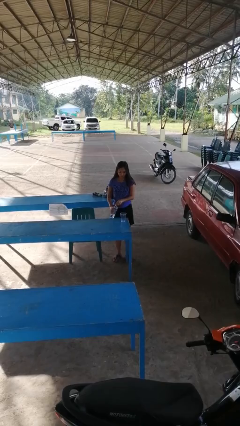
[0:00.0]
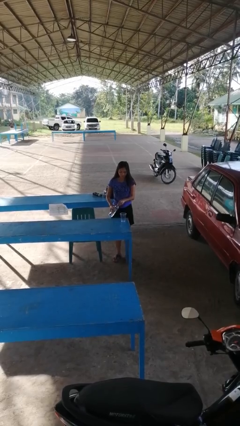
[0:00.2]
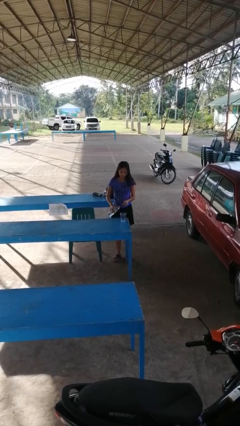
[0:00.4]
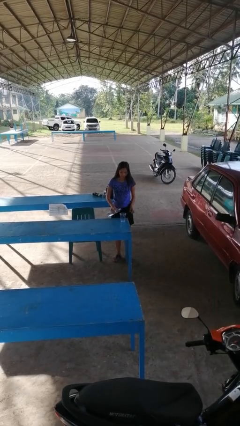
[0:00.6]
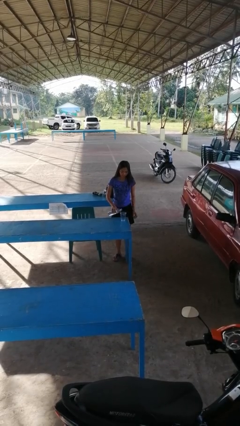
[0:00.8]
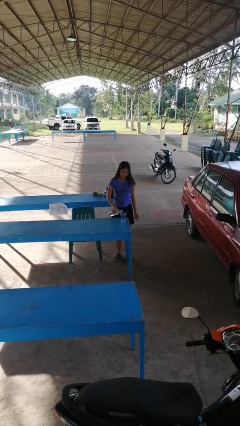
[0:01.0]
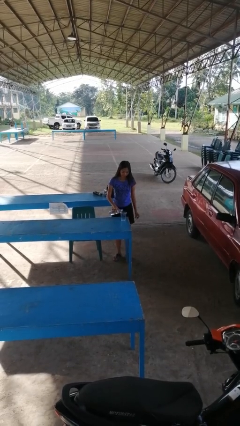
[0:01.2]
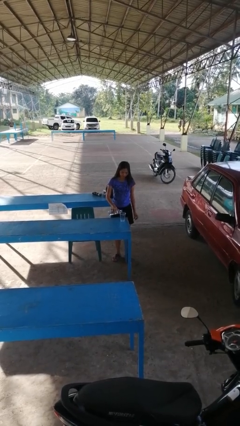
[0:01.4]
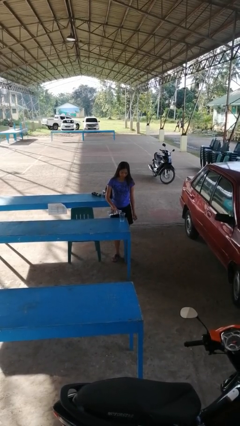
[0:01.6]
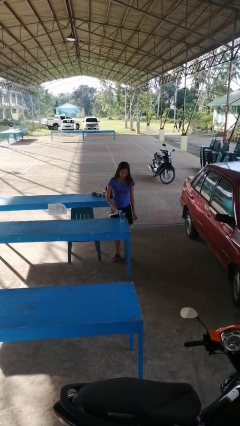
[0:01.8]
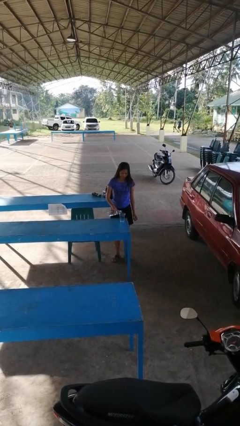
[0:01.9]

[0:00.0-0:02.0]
person pours liquid into cup

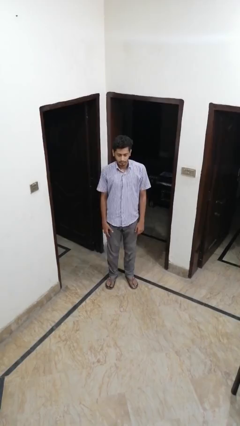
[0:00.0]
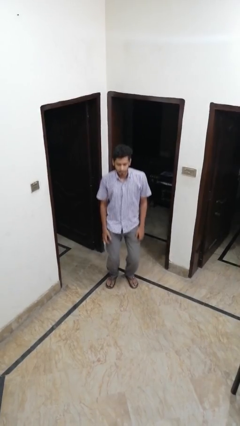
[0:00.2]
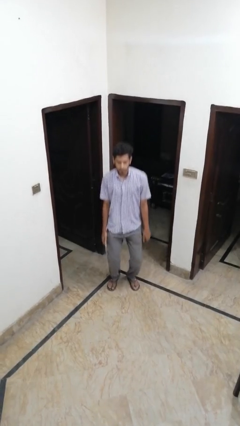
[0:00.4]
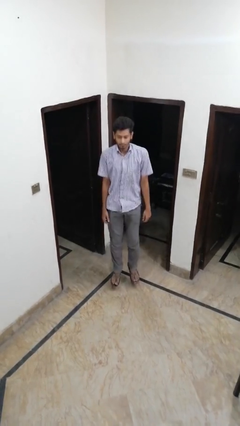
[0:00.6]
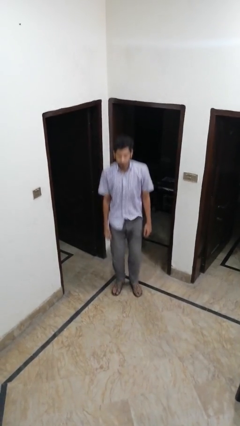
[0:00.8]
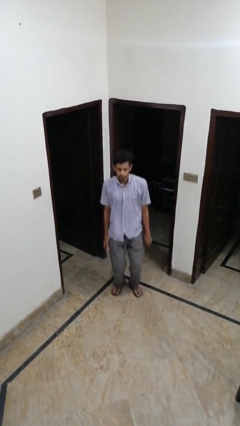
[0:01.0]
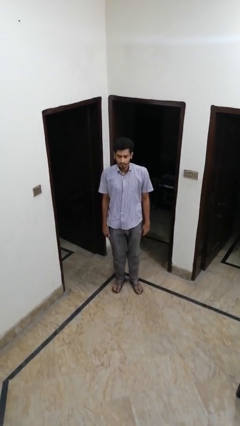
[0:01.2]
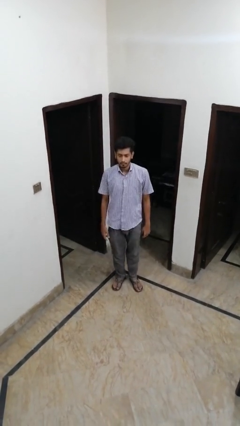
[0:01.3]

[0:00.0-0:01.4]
person jumps

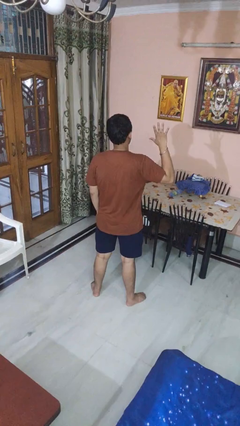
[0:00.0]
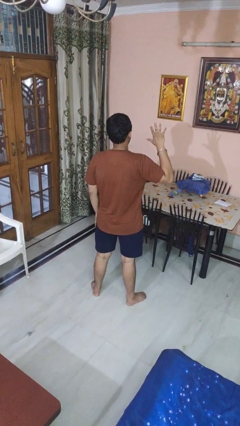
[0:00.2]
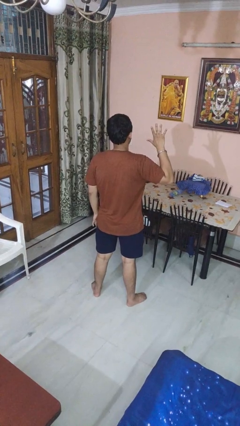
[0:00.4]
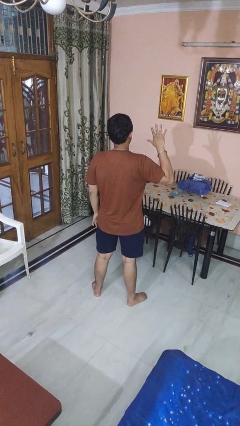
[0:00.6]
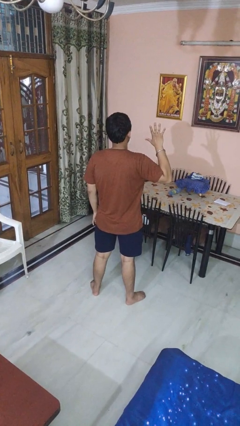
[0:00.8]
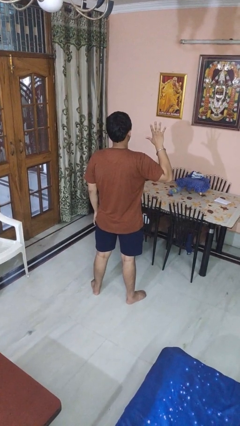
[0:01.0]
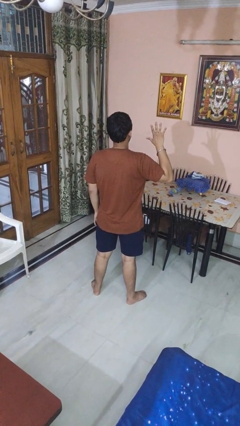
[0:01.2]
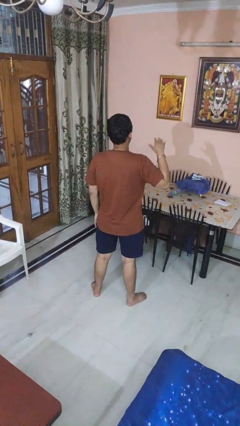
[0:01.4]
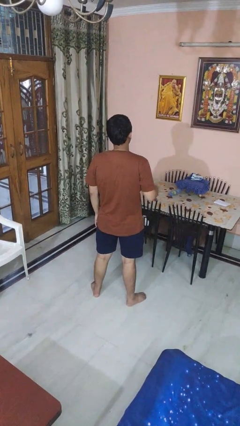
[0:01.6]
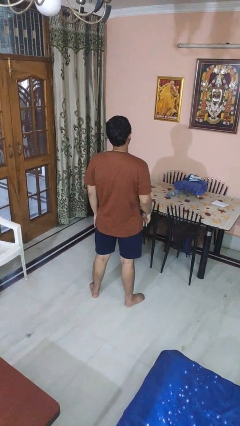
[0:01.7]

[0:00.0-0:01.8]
person gestures number five

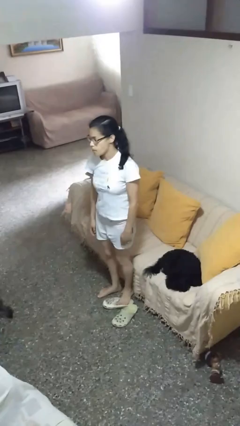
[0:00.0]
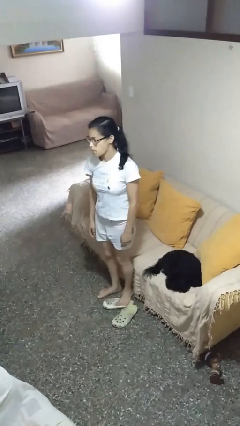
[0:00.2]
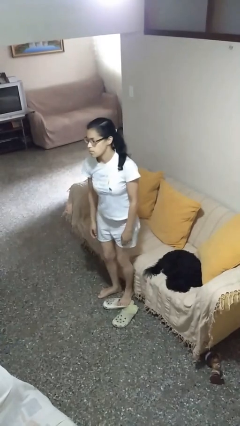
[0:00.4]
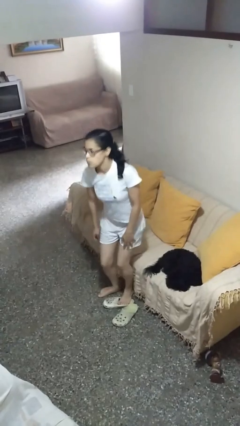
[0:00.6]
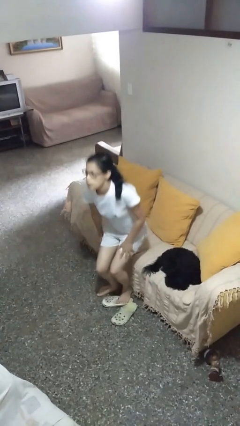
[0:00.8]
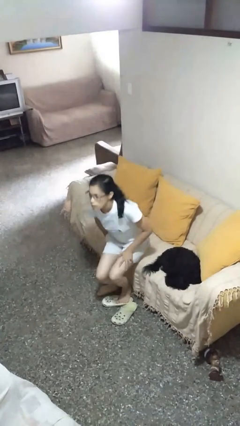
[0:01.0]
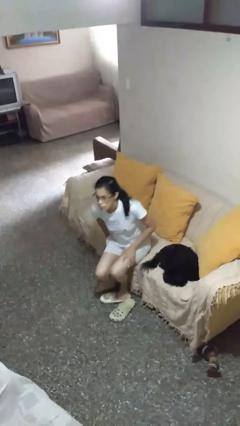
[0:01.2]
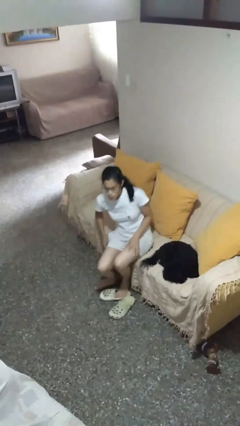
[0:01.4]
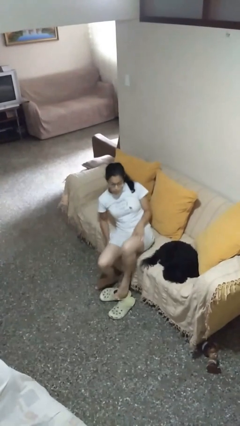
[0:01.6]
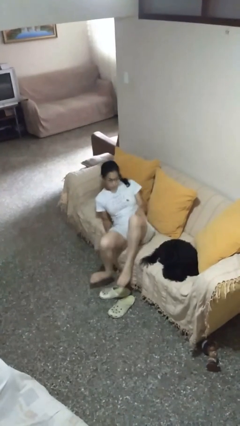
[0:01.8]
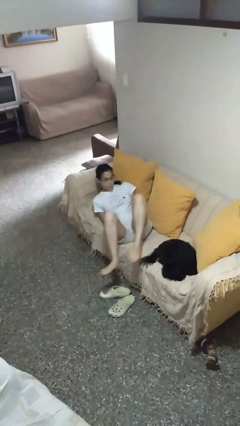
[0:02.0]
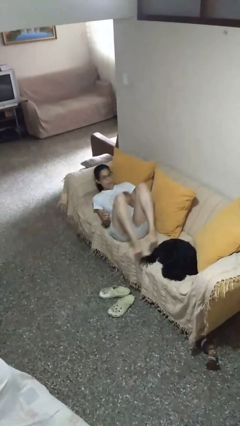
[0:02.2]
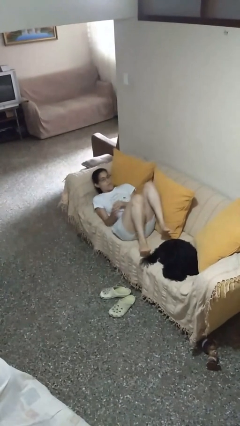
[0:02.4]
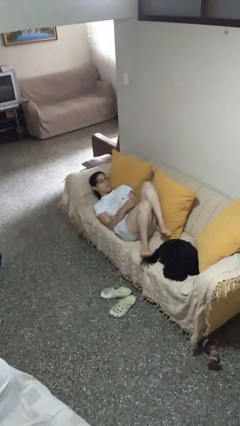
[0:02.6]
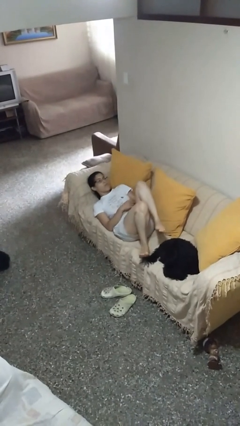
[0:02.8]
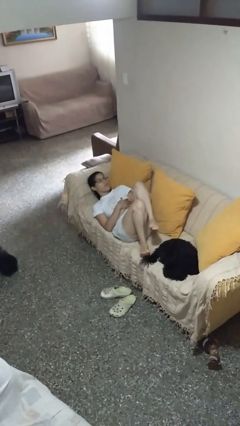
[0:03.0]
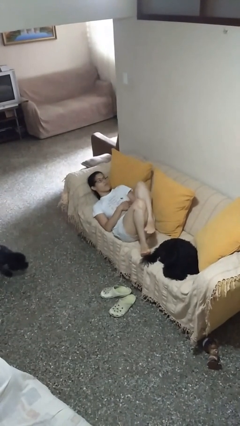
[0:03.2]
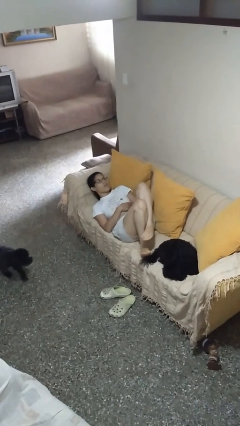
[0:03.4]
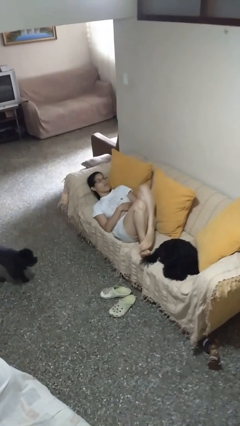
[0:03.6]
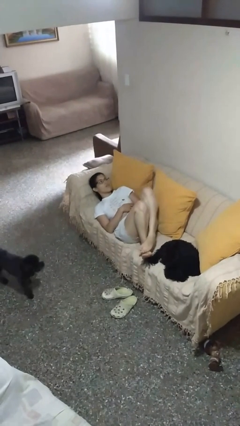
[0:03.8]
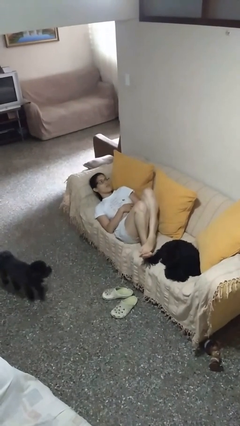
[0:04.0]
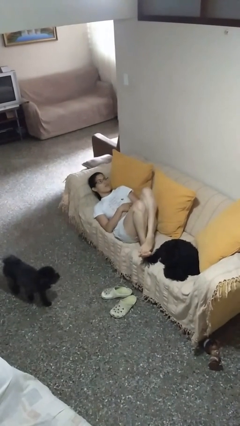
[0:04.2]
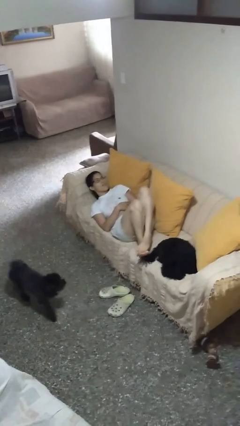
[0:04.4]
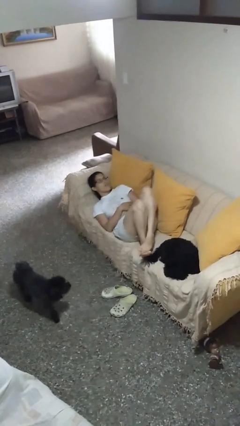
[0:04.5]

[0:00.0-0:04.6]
person lies down on couch

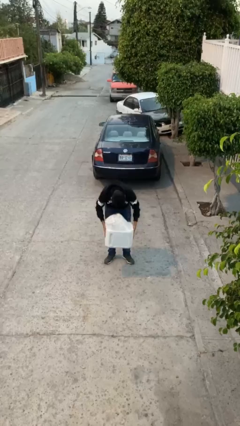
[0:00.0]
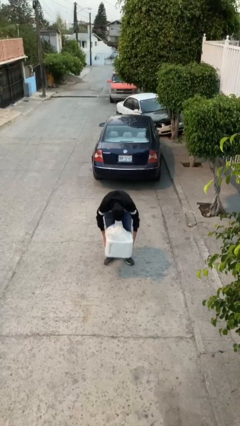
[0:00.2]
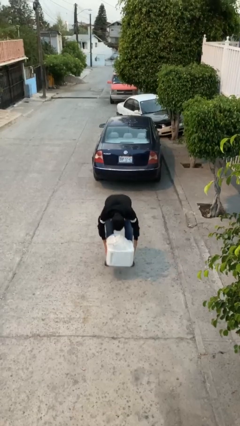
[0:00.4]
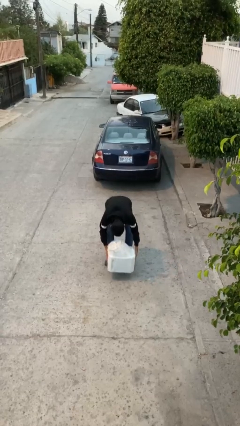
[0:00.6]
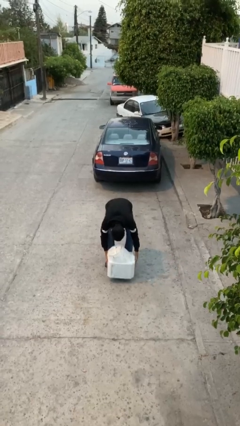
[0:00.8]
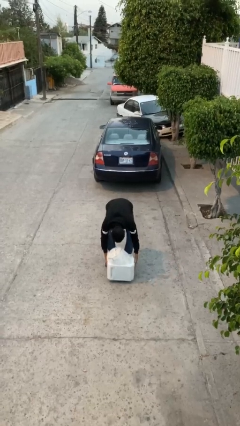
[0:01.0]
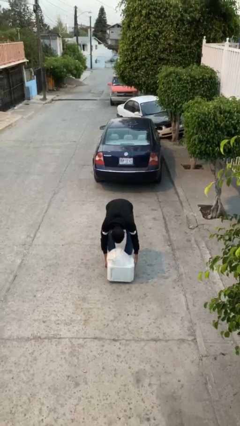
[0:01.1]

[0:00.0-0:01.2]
person puts down object on floor

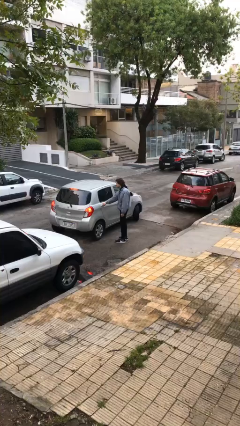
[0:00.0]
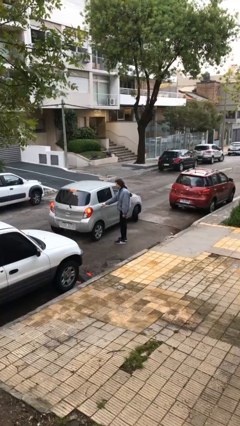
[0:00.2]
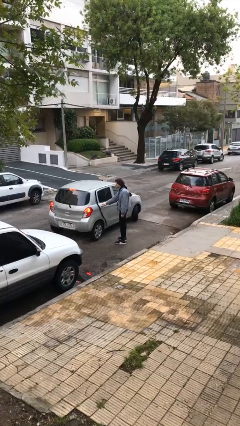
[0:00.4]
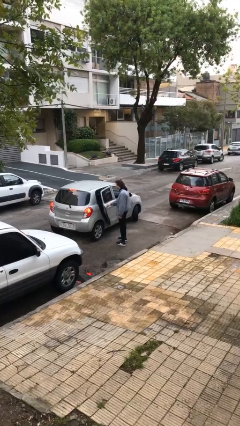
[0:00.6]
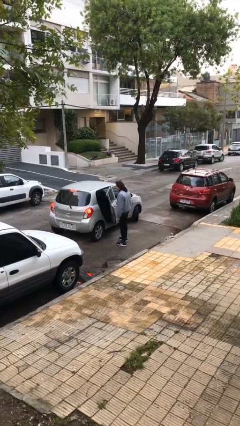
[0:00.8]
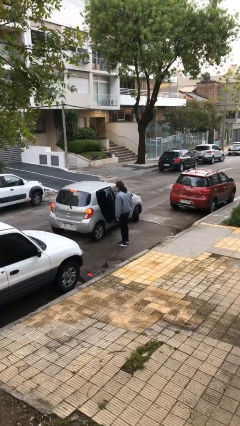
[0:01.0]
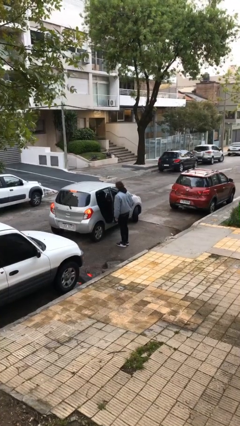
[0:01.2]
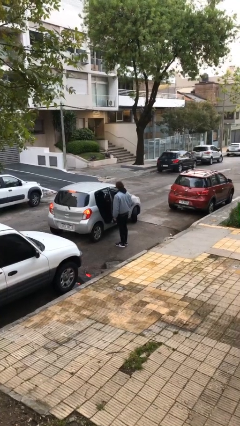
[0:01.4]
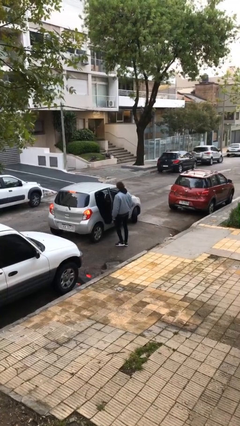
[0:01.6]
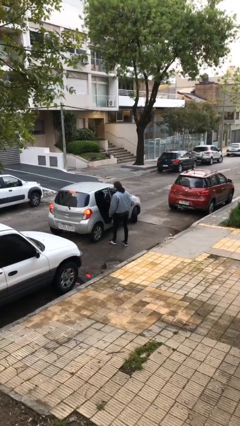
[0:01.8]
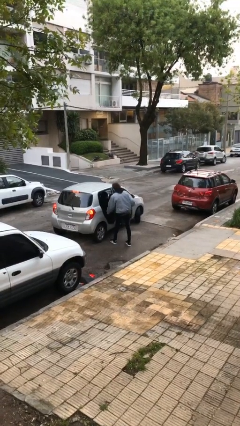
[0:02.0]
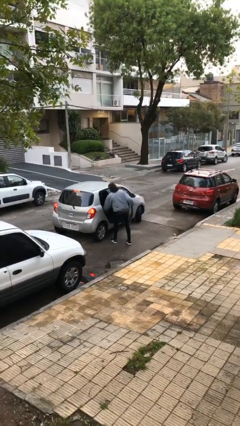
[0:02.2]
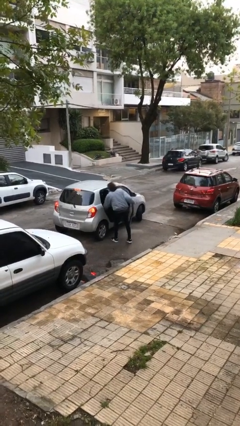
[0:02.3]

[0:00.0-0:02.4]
person opens car door

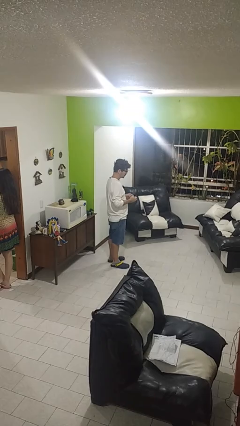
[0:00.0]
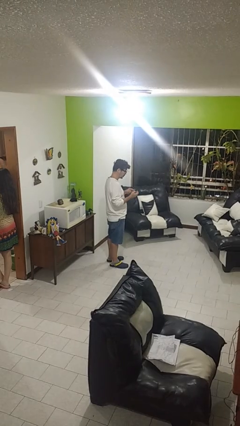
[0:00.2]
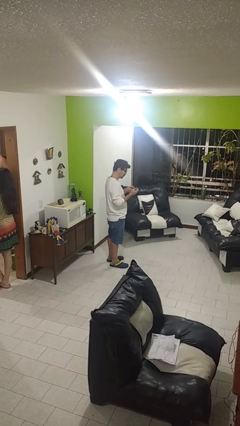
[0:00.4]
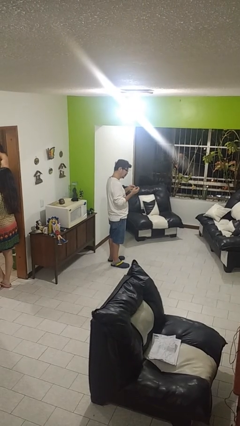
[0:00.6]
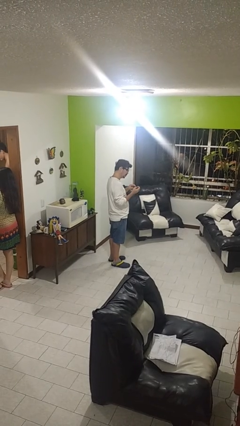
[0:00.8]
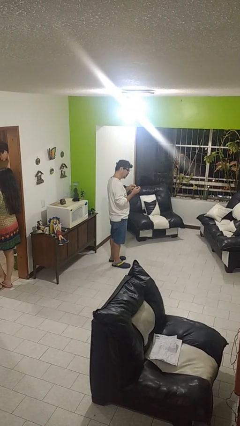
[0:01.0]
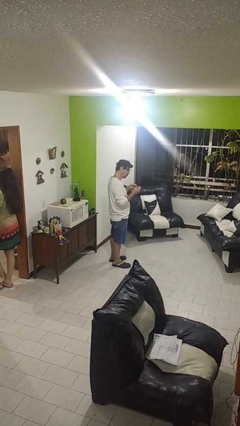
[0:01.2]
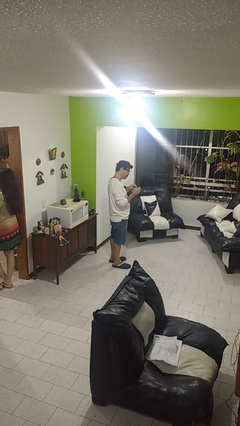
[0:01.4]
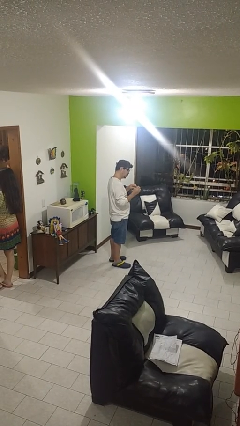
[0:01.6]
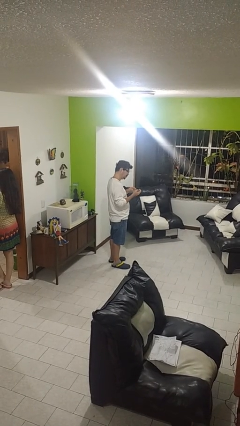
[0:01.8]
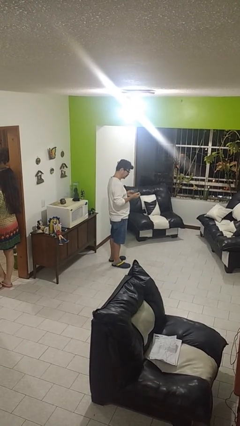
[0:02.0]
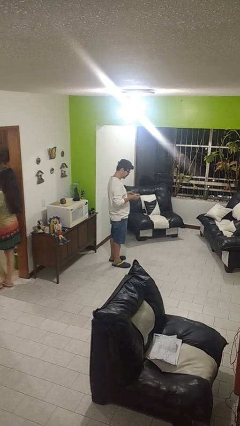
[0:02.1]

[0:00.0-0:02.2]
person clips fingernails

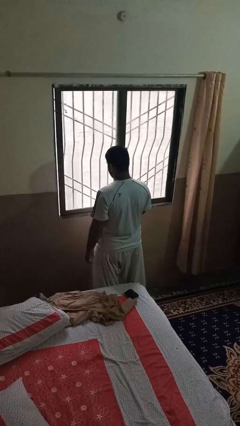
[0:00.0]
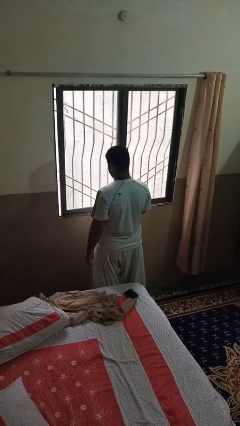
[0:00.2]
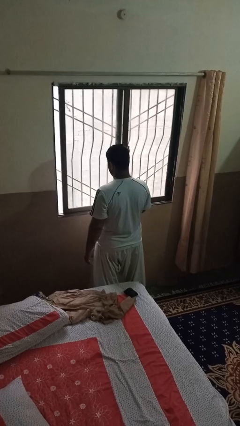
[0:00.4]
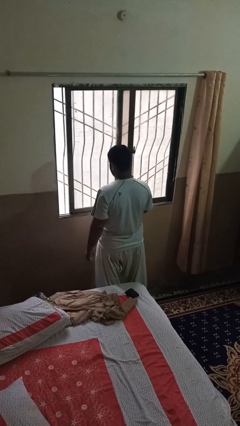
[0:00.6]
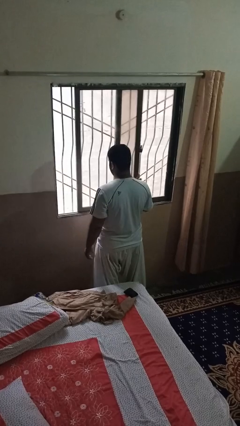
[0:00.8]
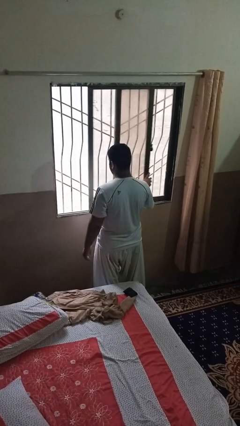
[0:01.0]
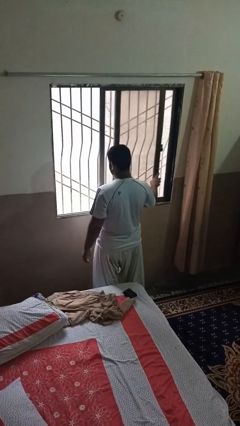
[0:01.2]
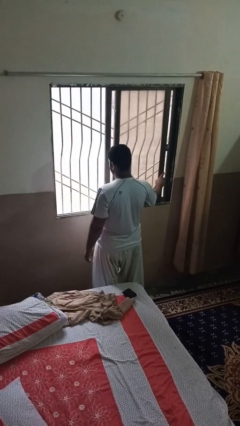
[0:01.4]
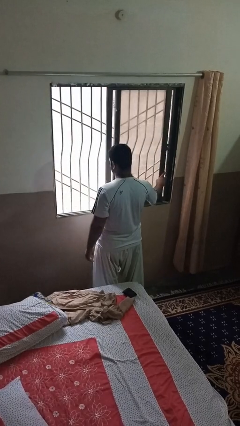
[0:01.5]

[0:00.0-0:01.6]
person opens home window
